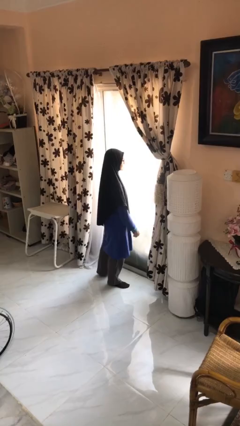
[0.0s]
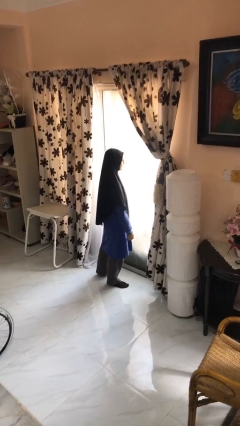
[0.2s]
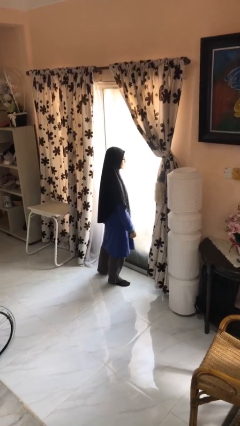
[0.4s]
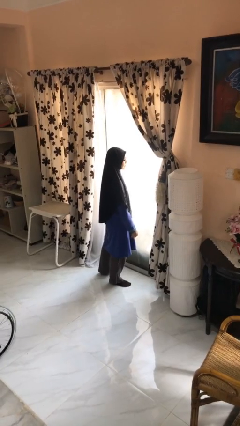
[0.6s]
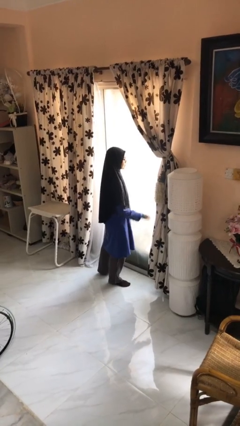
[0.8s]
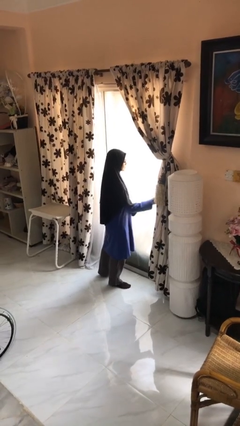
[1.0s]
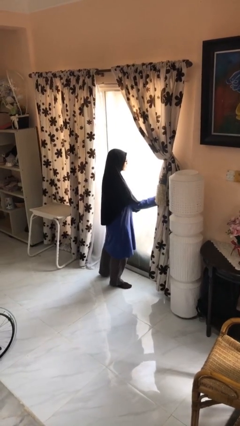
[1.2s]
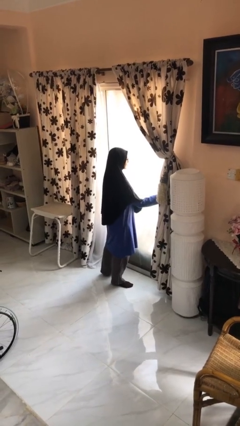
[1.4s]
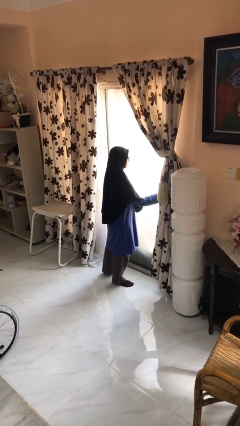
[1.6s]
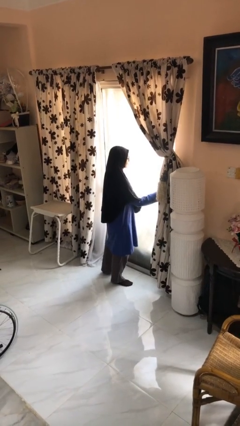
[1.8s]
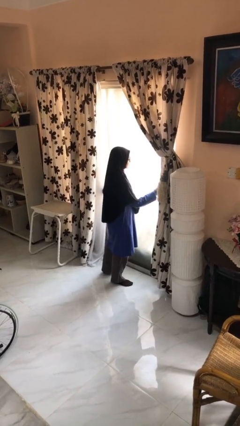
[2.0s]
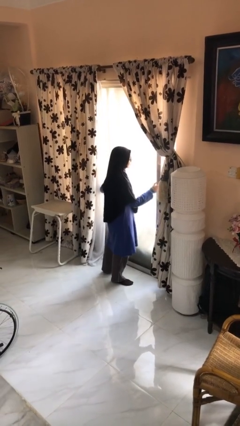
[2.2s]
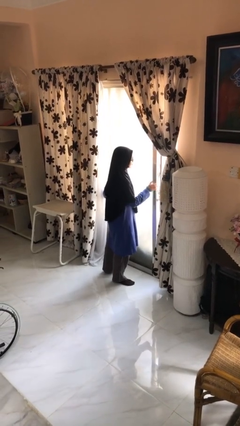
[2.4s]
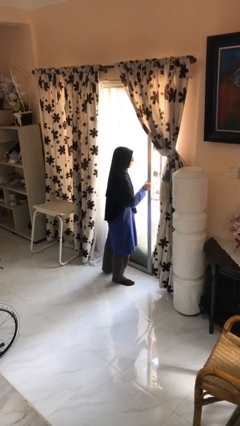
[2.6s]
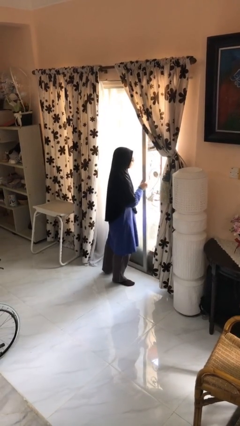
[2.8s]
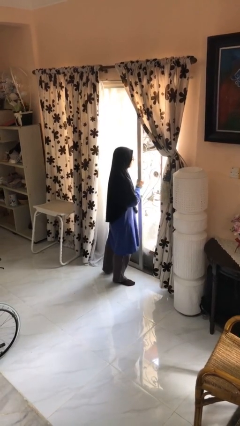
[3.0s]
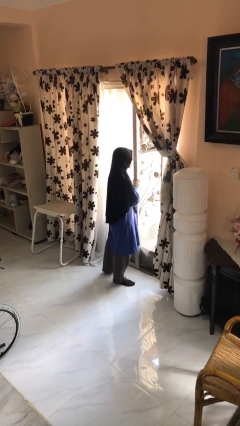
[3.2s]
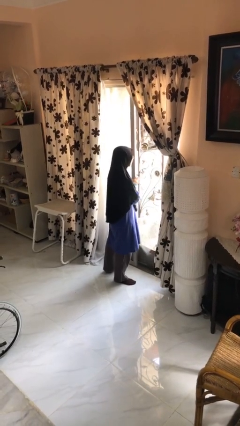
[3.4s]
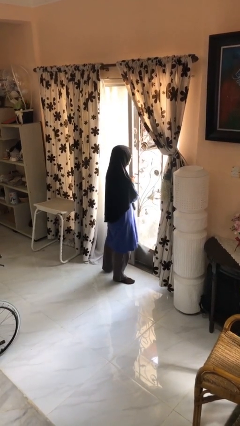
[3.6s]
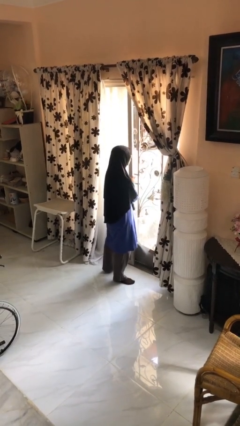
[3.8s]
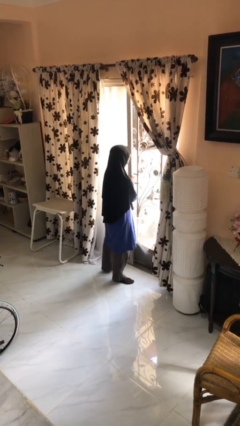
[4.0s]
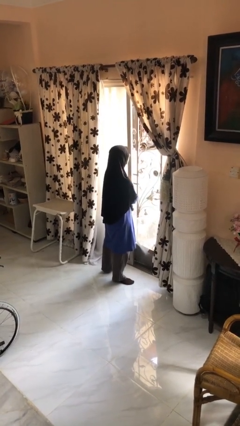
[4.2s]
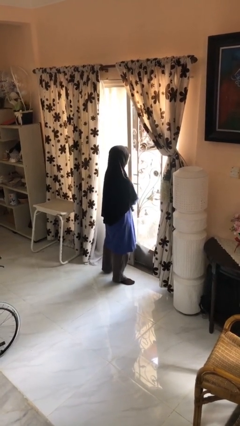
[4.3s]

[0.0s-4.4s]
person opens sliding door

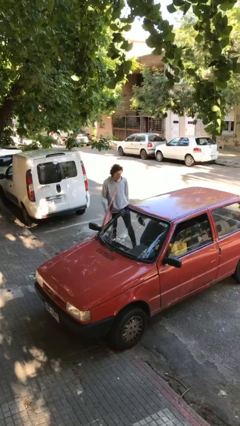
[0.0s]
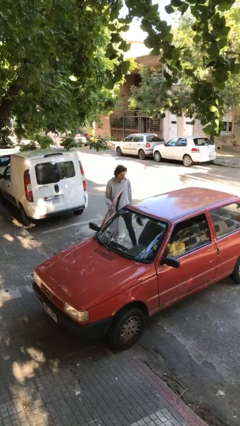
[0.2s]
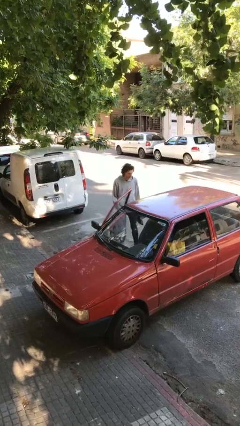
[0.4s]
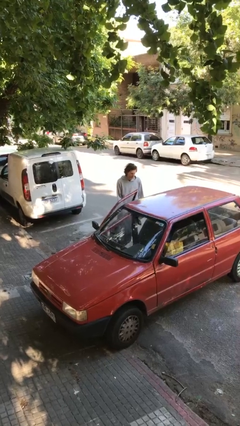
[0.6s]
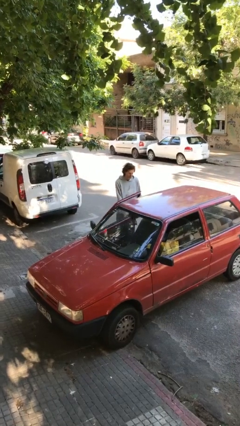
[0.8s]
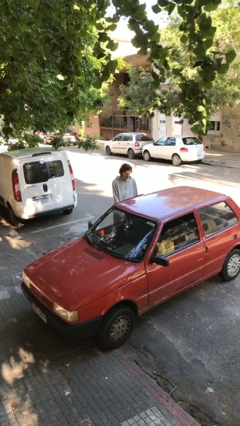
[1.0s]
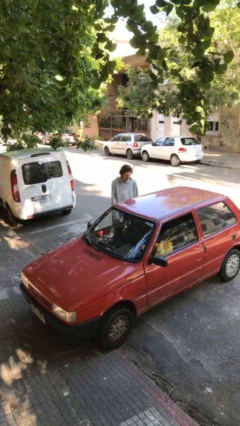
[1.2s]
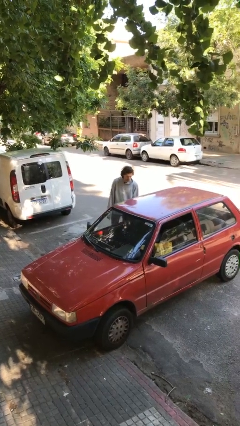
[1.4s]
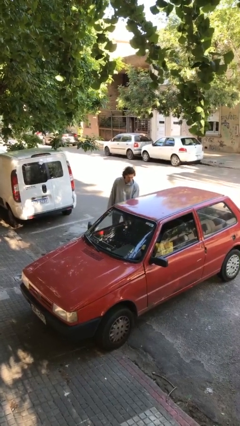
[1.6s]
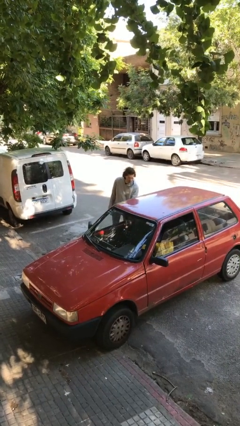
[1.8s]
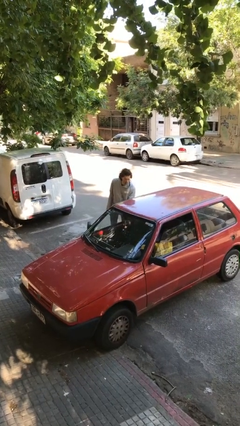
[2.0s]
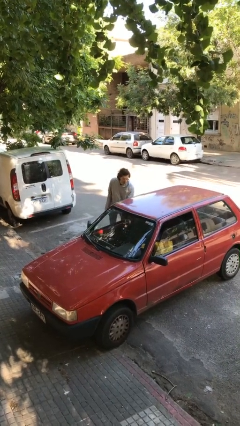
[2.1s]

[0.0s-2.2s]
person closes car door

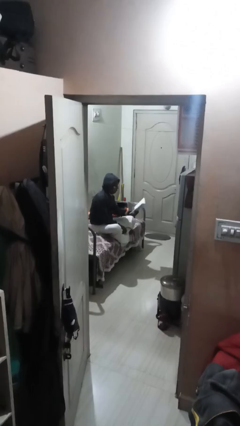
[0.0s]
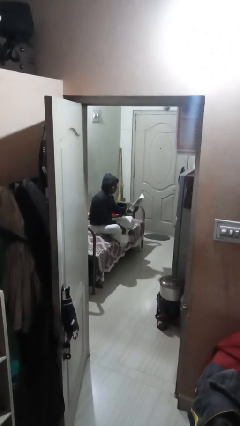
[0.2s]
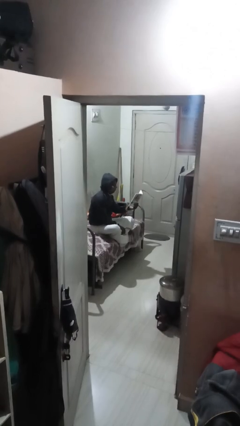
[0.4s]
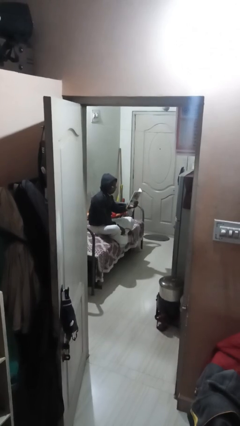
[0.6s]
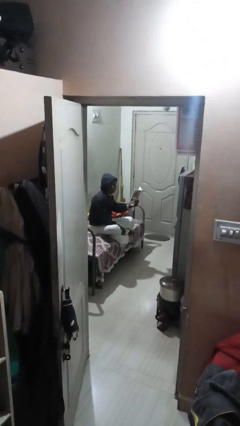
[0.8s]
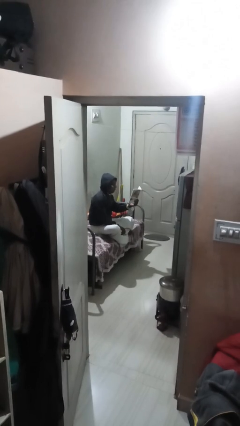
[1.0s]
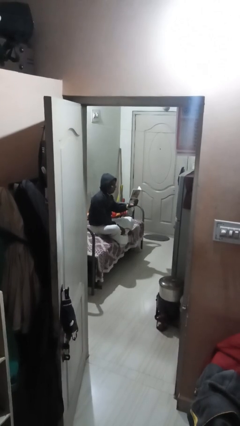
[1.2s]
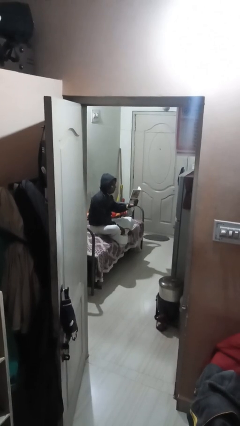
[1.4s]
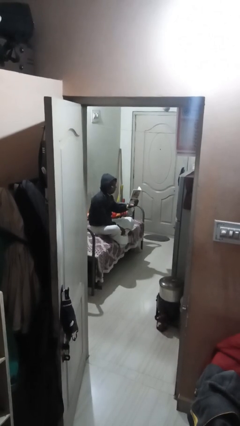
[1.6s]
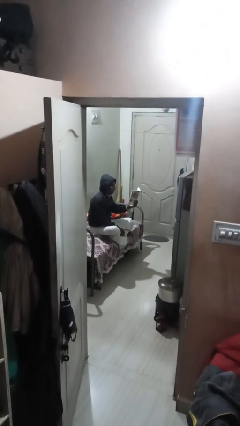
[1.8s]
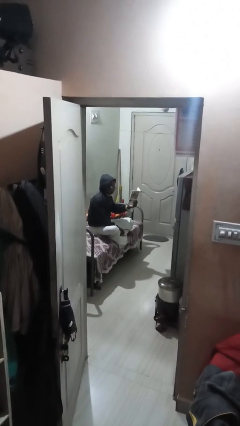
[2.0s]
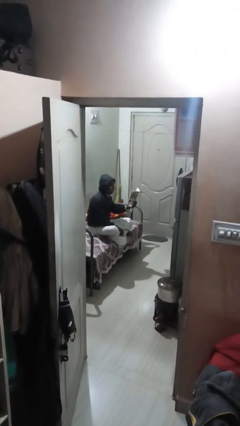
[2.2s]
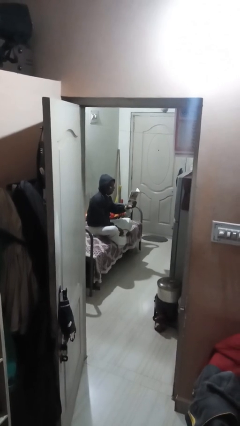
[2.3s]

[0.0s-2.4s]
person reads document

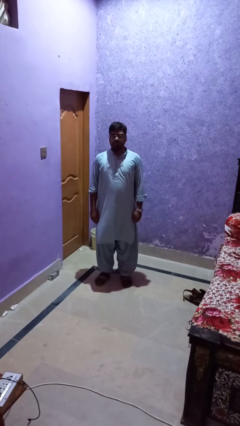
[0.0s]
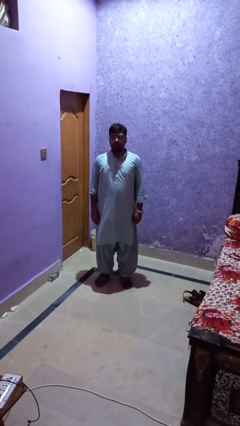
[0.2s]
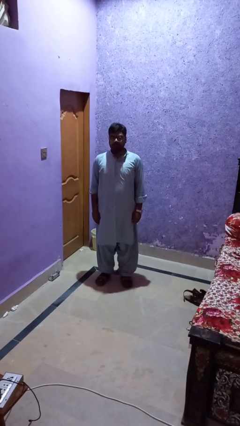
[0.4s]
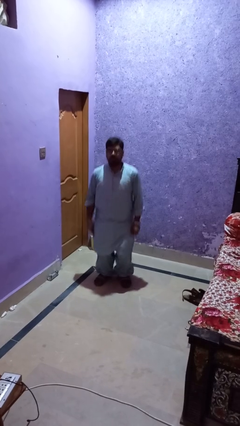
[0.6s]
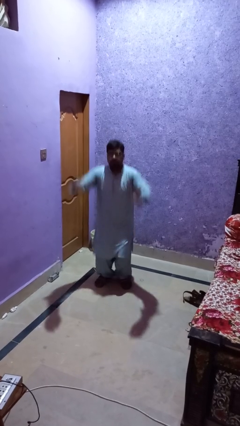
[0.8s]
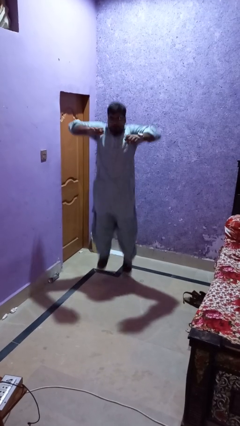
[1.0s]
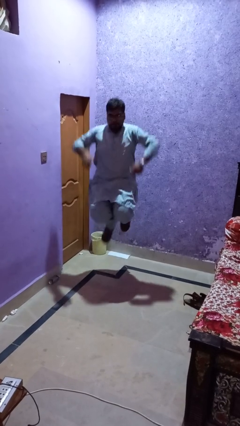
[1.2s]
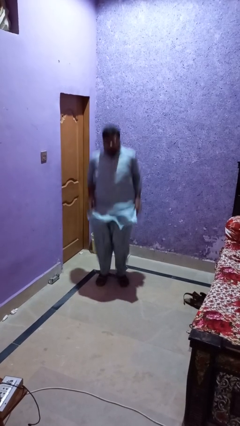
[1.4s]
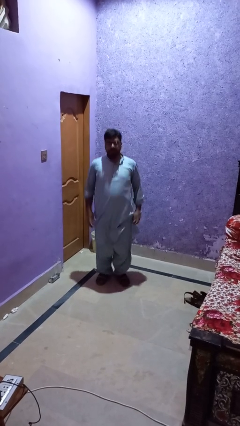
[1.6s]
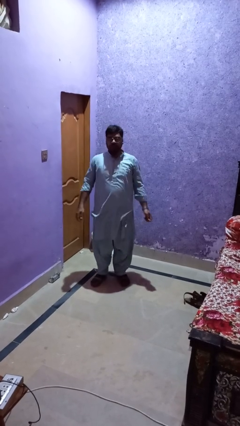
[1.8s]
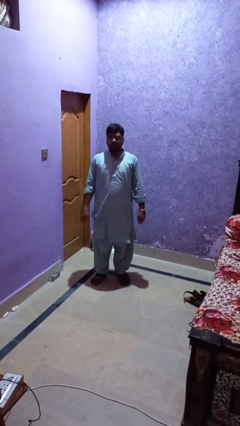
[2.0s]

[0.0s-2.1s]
person jumps

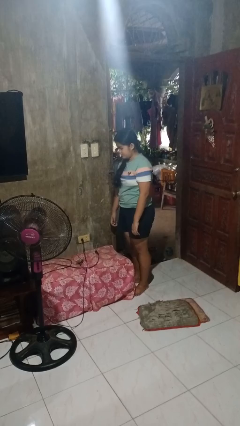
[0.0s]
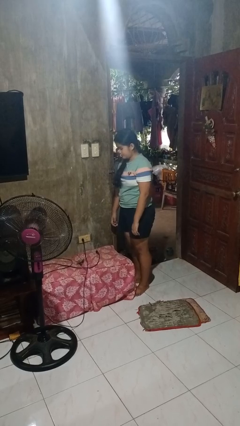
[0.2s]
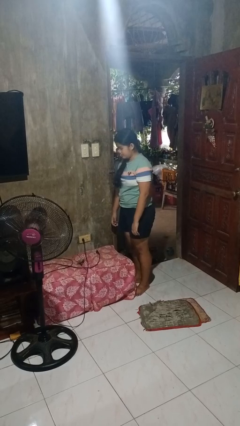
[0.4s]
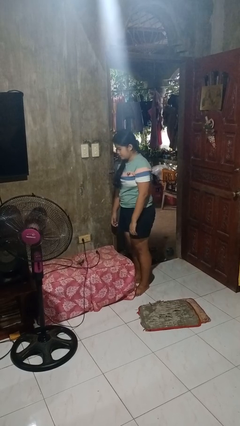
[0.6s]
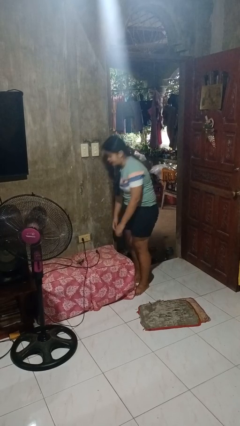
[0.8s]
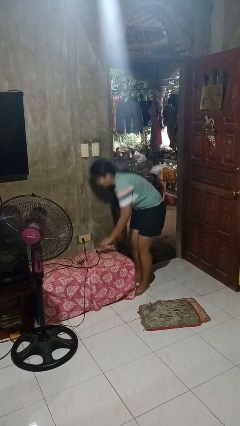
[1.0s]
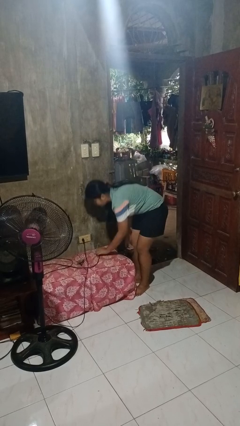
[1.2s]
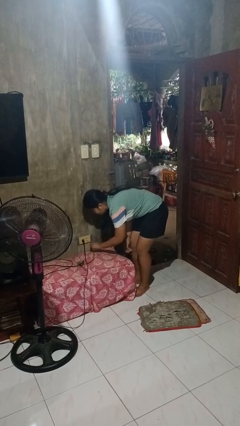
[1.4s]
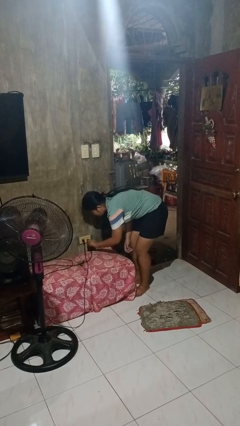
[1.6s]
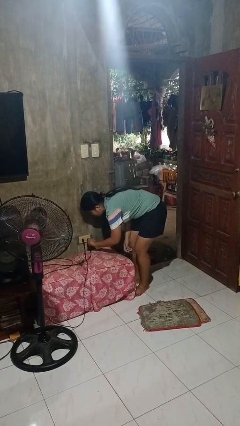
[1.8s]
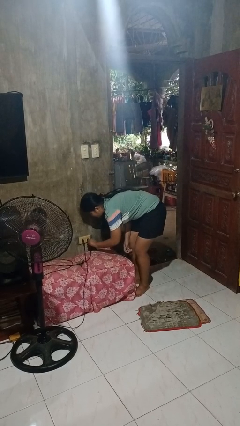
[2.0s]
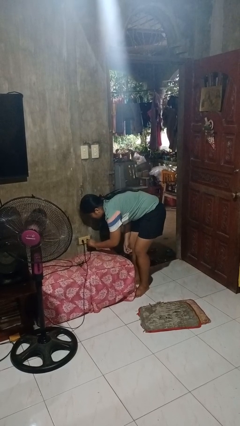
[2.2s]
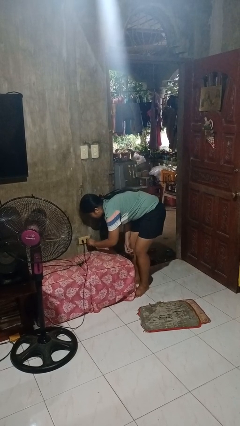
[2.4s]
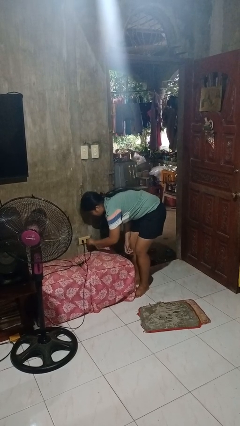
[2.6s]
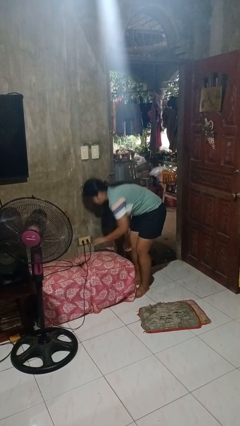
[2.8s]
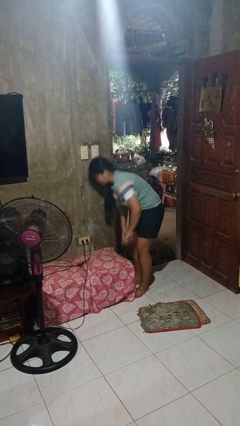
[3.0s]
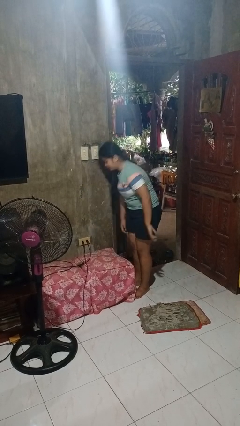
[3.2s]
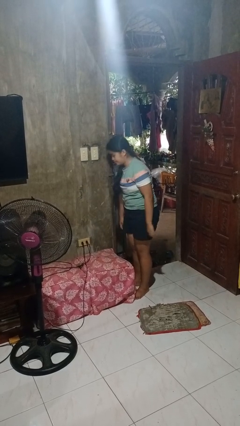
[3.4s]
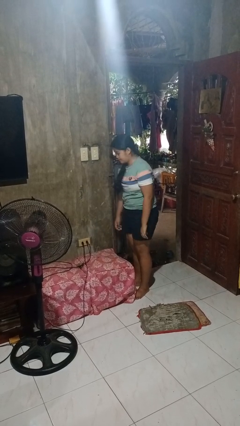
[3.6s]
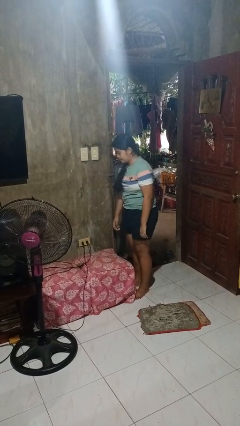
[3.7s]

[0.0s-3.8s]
person plugs into electrical socket

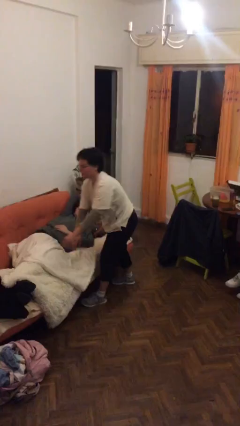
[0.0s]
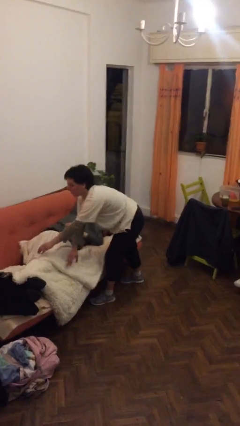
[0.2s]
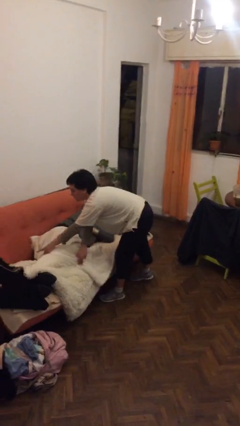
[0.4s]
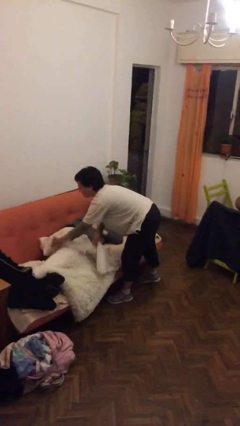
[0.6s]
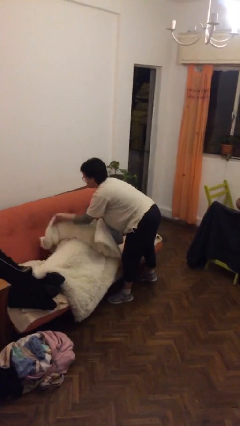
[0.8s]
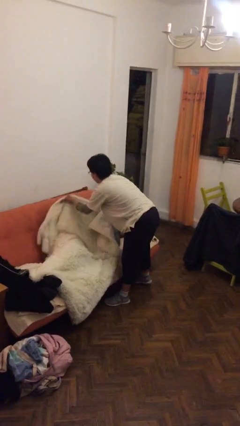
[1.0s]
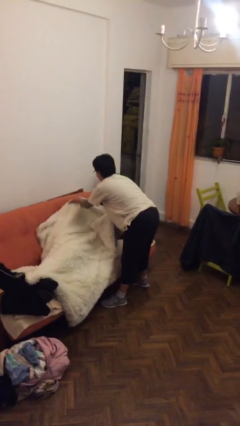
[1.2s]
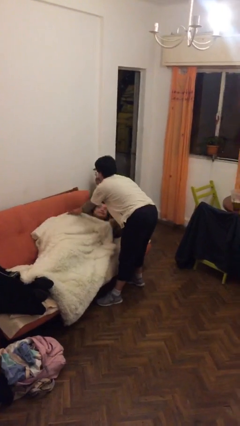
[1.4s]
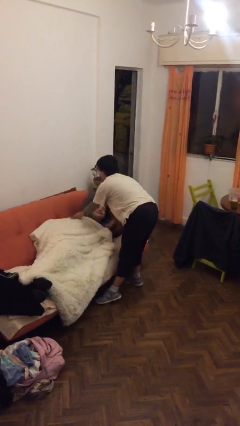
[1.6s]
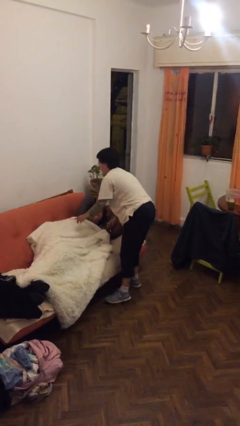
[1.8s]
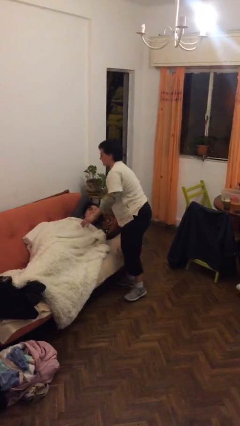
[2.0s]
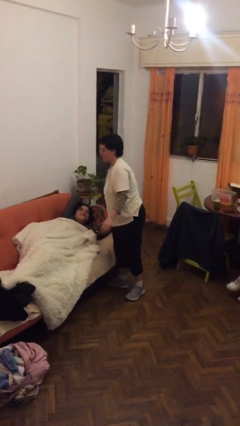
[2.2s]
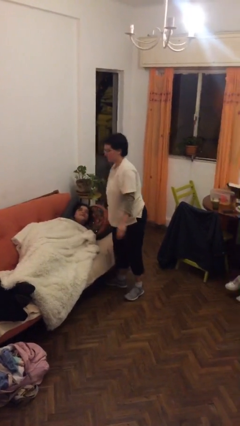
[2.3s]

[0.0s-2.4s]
person covers friend with blanket

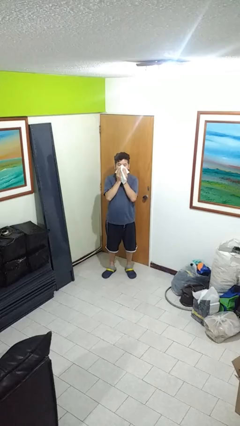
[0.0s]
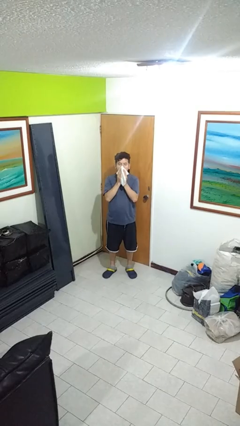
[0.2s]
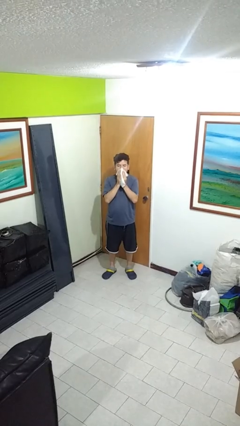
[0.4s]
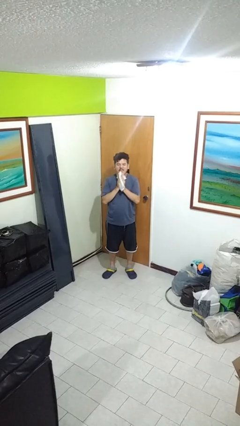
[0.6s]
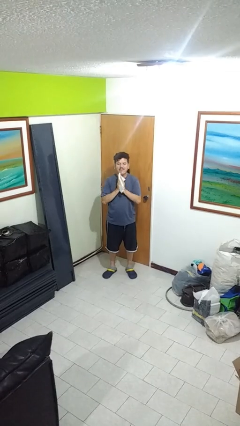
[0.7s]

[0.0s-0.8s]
person wipes mouth with napkin
